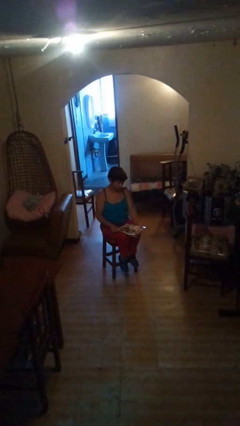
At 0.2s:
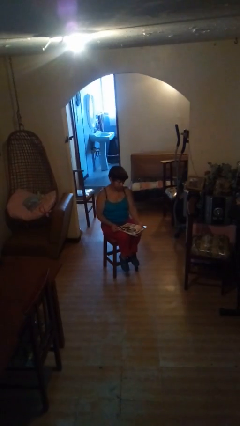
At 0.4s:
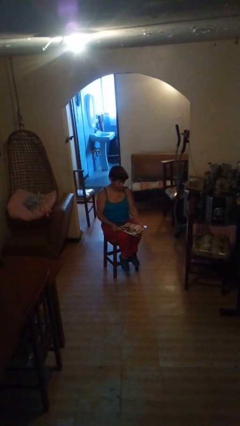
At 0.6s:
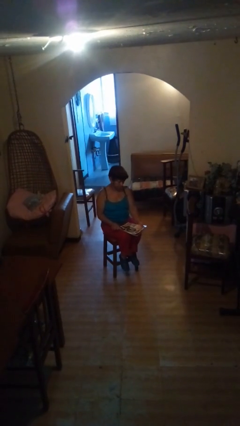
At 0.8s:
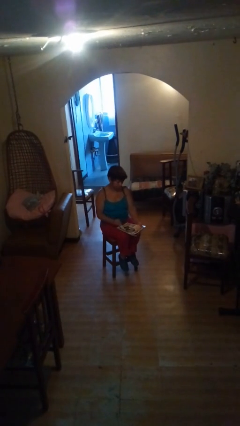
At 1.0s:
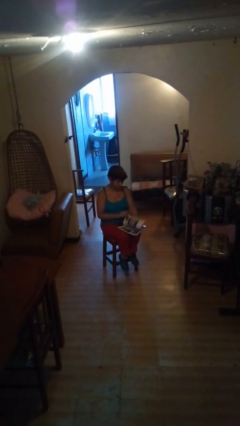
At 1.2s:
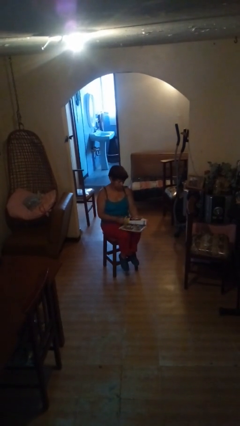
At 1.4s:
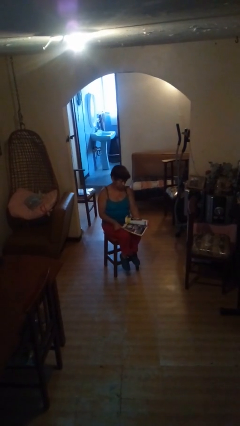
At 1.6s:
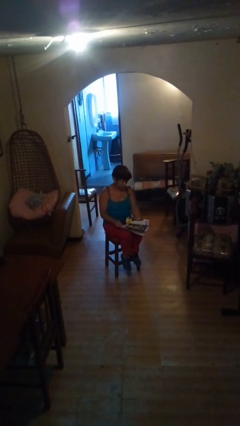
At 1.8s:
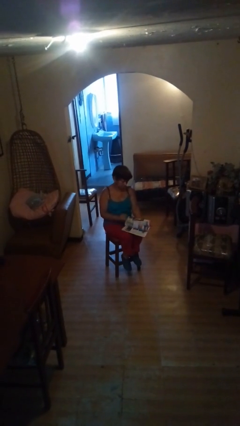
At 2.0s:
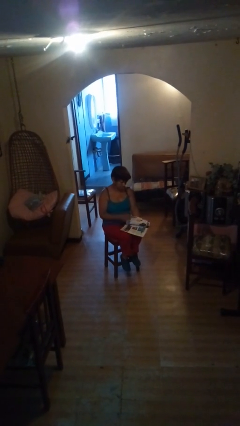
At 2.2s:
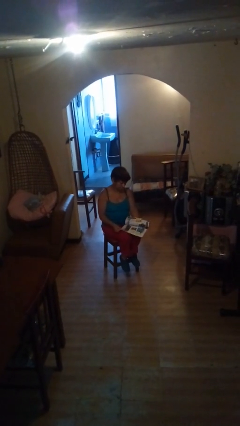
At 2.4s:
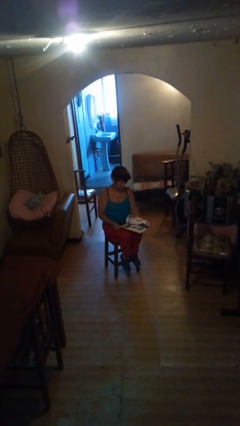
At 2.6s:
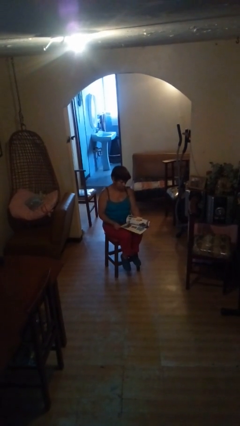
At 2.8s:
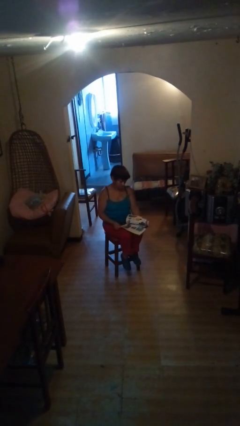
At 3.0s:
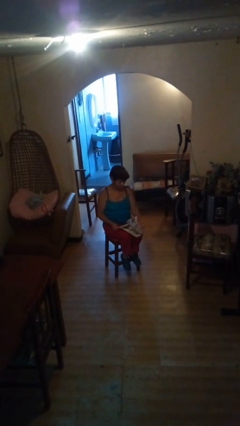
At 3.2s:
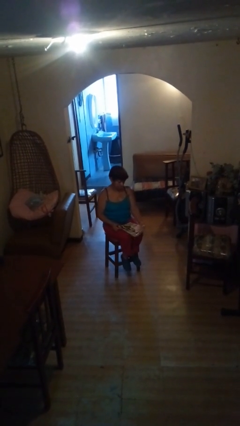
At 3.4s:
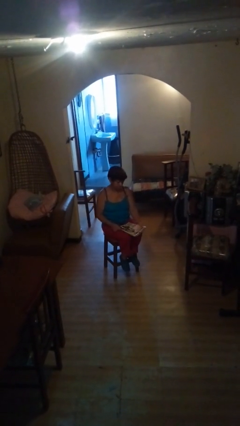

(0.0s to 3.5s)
person reads magazine

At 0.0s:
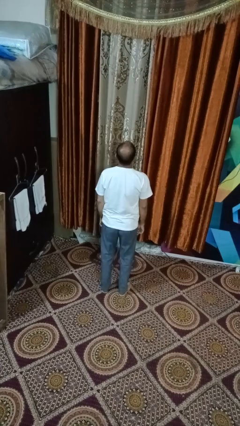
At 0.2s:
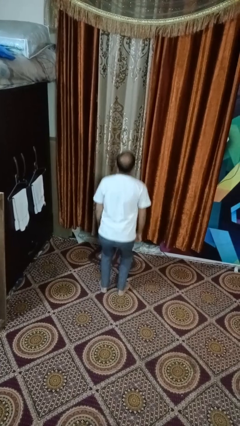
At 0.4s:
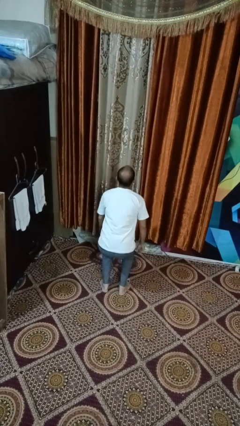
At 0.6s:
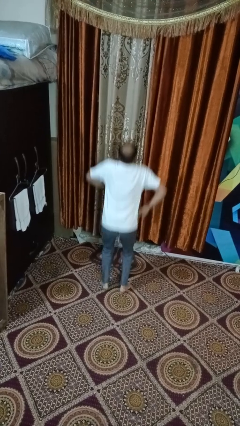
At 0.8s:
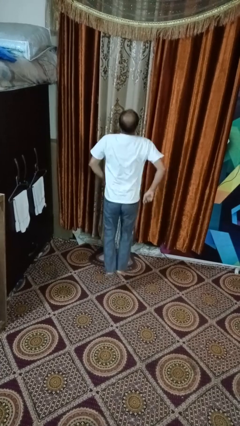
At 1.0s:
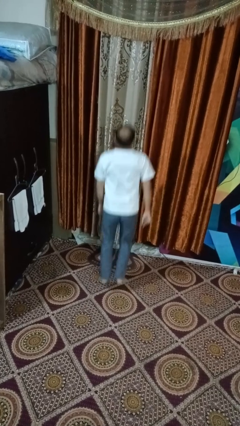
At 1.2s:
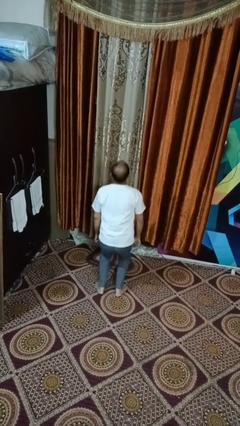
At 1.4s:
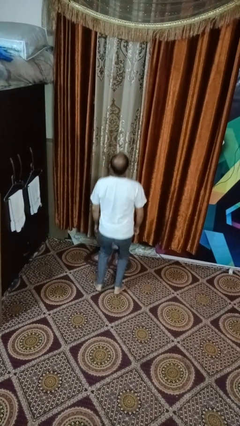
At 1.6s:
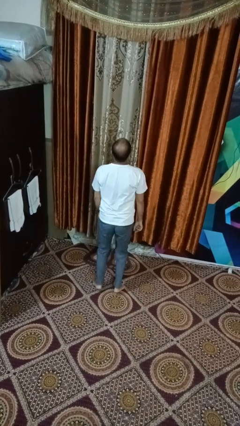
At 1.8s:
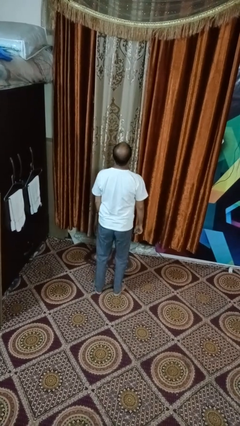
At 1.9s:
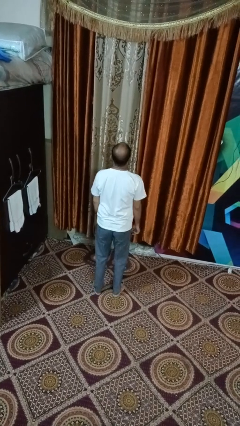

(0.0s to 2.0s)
person jumps

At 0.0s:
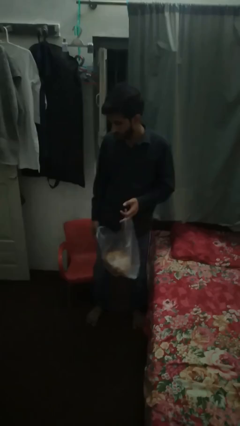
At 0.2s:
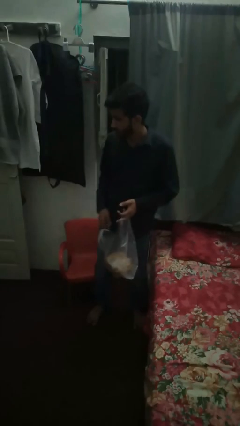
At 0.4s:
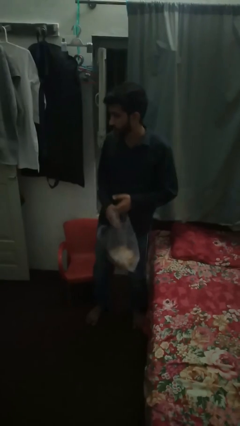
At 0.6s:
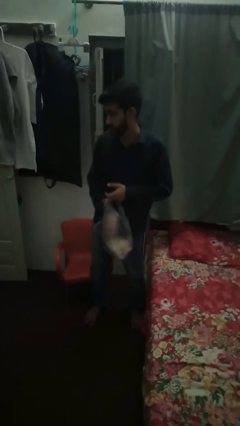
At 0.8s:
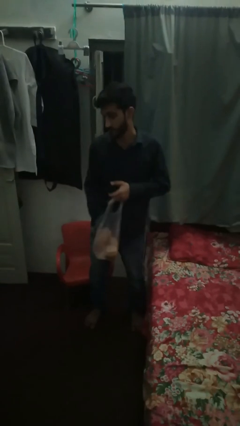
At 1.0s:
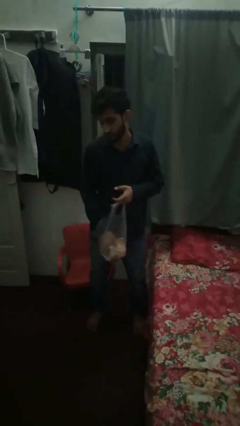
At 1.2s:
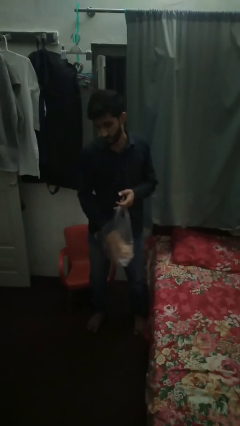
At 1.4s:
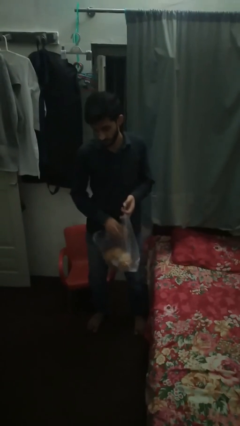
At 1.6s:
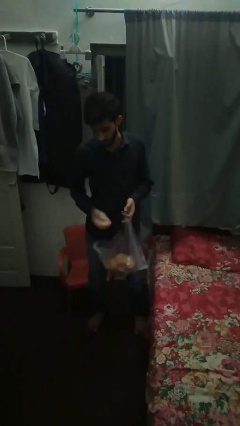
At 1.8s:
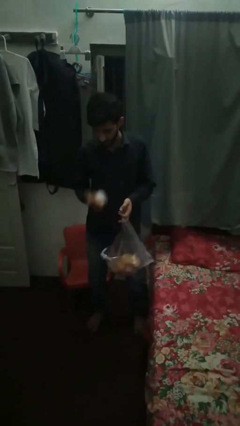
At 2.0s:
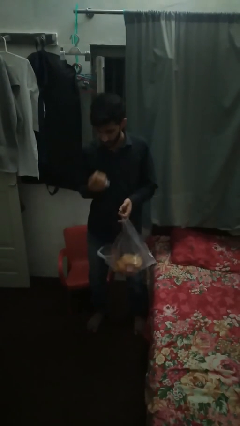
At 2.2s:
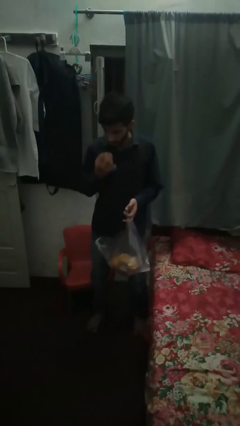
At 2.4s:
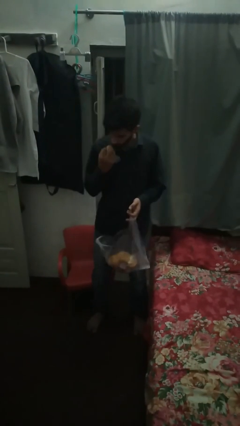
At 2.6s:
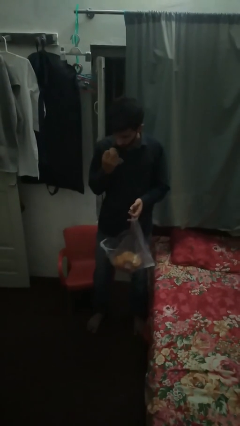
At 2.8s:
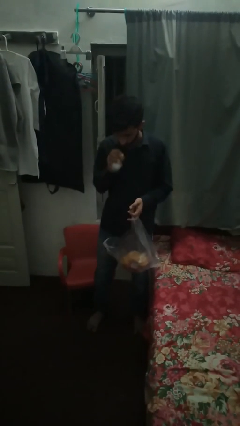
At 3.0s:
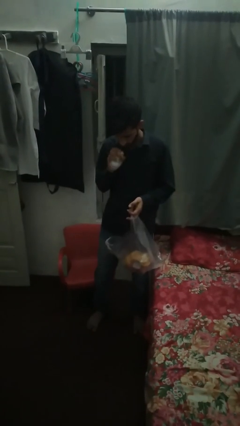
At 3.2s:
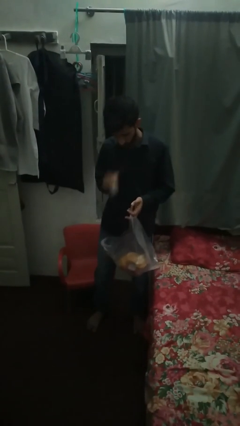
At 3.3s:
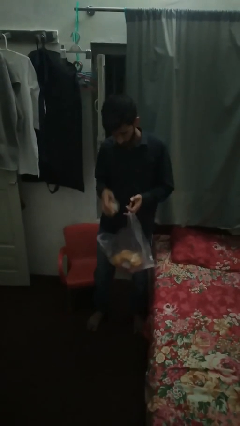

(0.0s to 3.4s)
person eats snack from bag

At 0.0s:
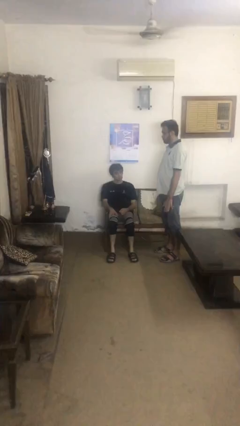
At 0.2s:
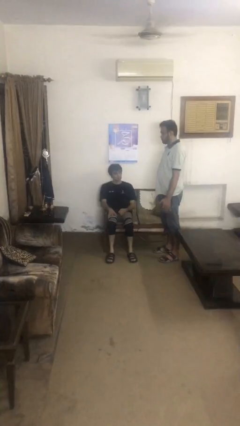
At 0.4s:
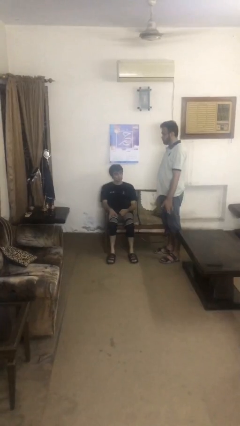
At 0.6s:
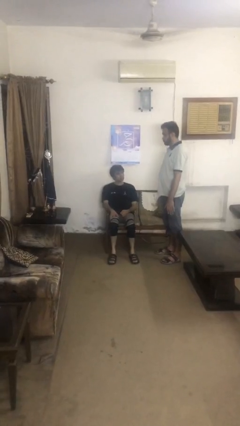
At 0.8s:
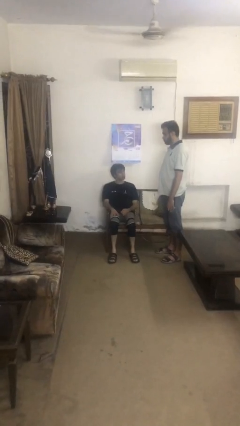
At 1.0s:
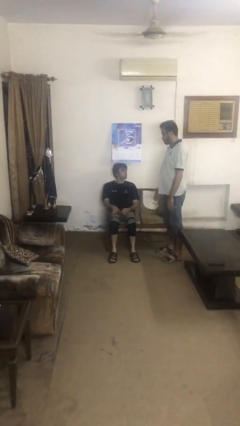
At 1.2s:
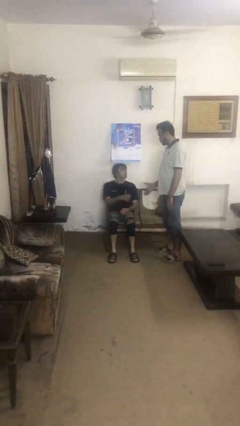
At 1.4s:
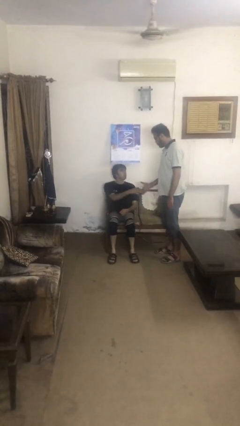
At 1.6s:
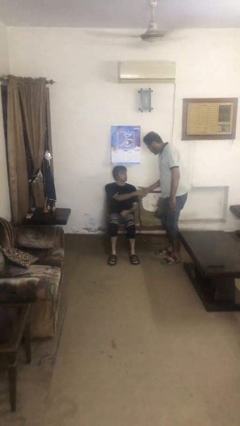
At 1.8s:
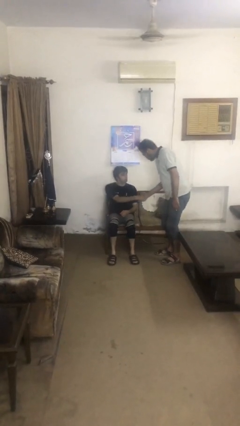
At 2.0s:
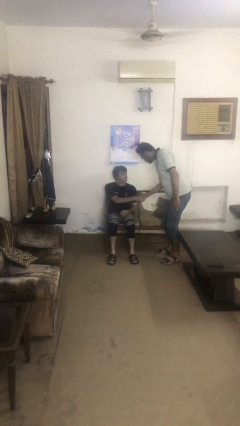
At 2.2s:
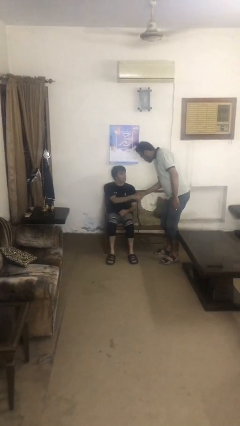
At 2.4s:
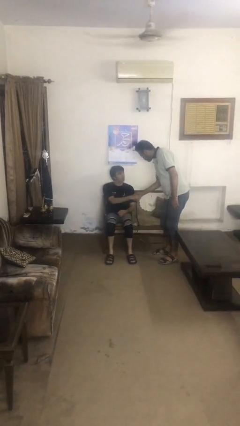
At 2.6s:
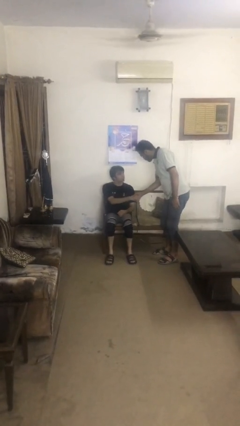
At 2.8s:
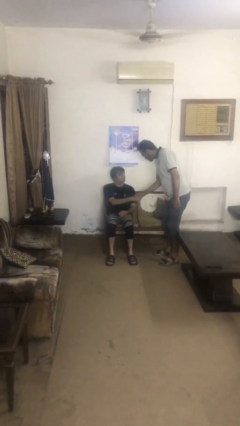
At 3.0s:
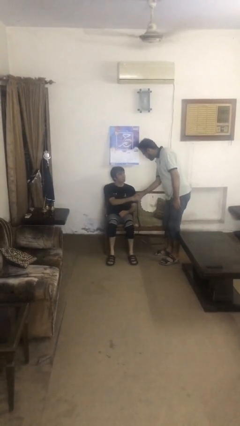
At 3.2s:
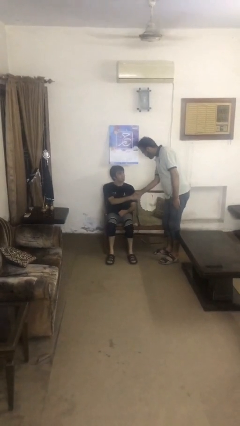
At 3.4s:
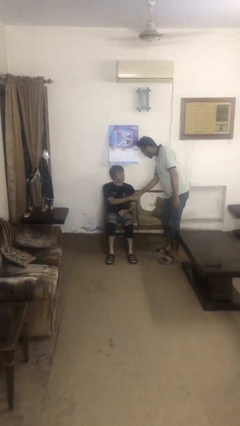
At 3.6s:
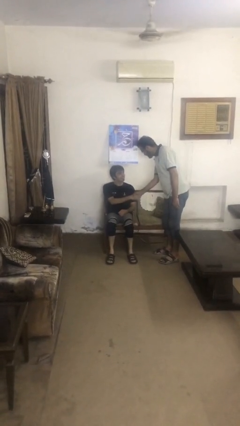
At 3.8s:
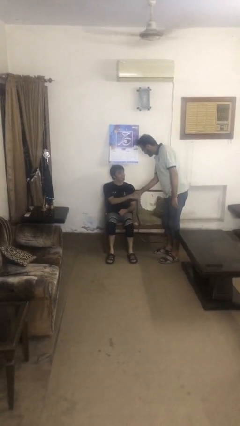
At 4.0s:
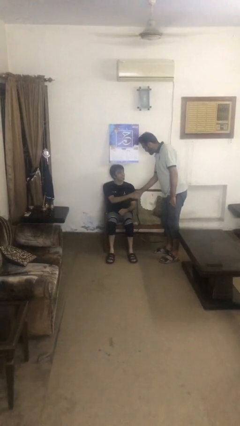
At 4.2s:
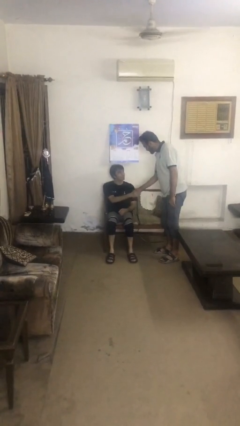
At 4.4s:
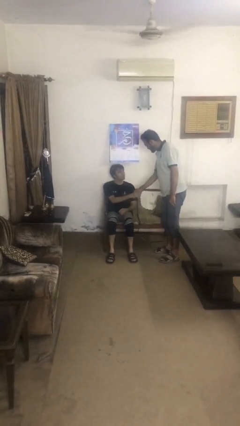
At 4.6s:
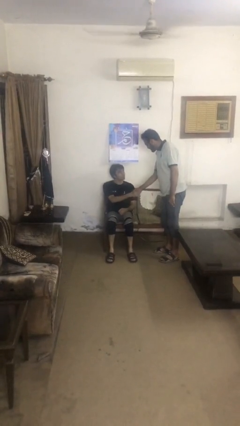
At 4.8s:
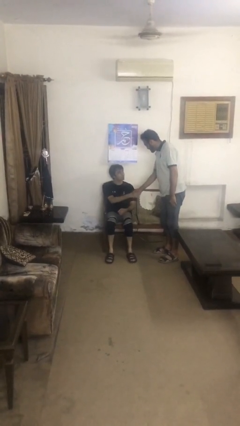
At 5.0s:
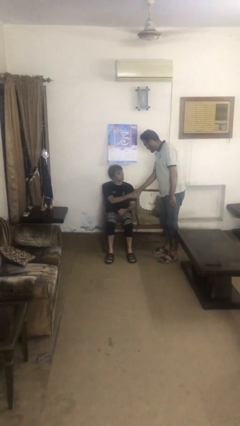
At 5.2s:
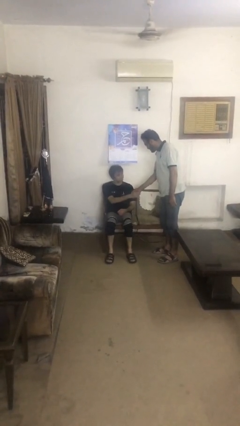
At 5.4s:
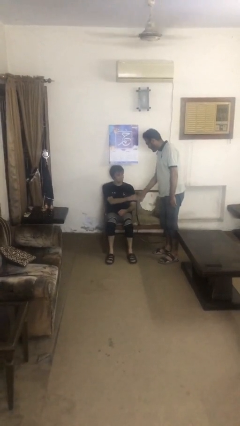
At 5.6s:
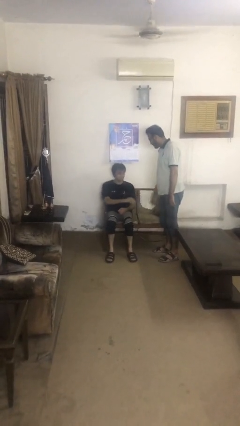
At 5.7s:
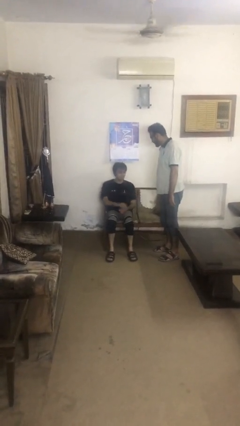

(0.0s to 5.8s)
person shakes hand

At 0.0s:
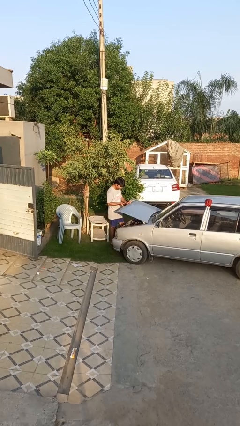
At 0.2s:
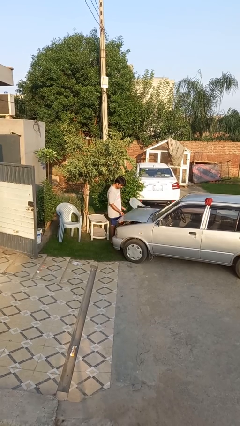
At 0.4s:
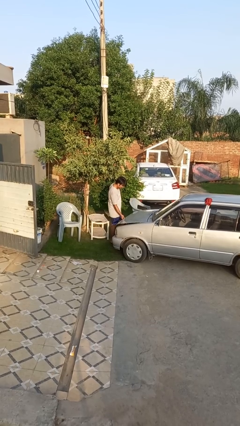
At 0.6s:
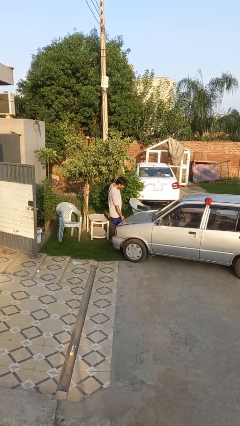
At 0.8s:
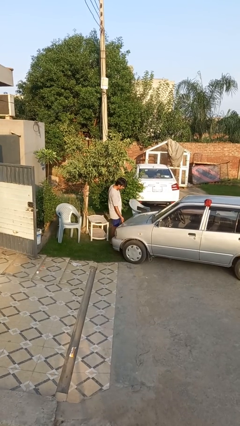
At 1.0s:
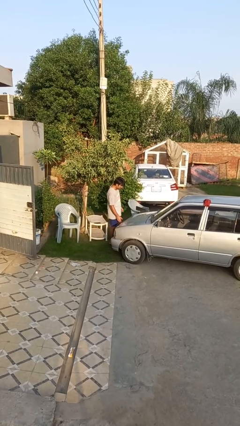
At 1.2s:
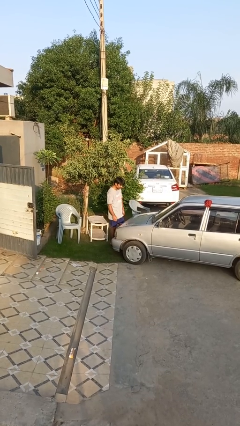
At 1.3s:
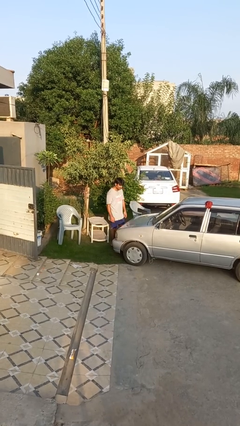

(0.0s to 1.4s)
person closes car hood

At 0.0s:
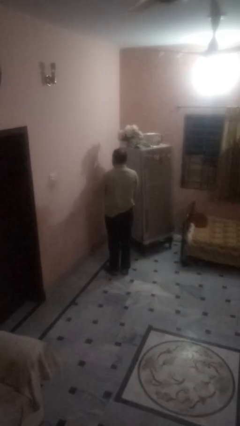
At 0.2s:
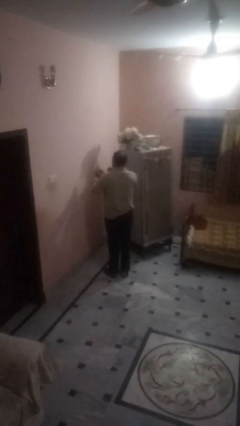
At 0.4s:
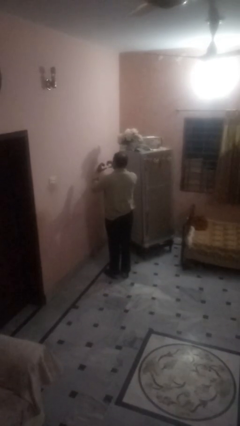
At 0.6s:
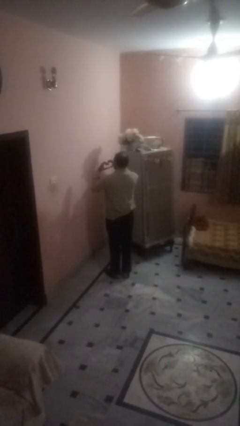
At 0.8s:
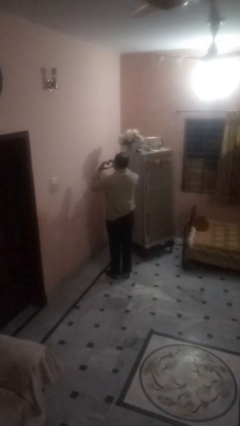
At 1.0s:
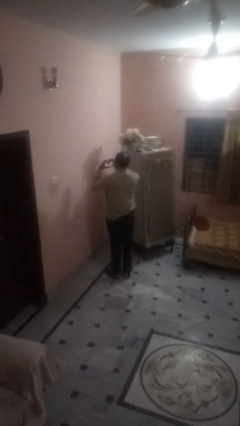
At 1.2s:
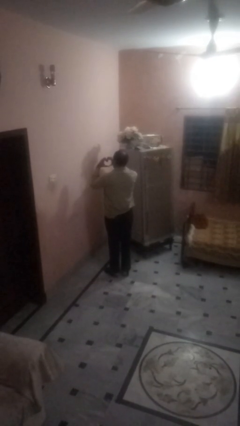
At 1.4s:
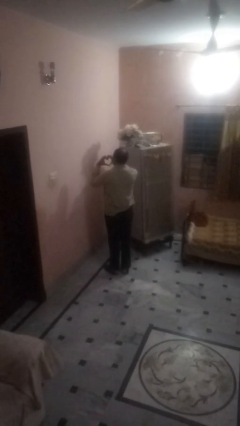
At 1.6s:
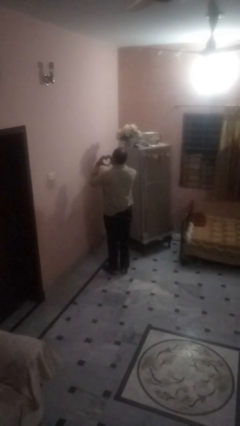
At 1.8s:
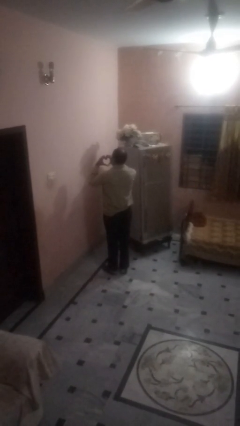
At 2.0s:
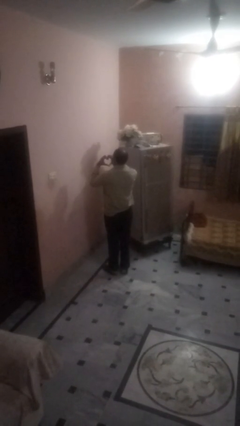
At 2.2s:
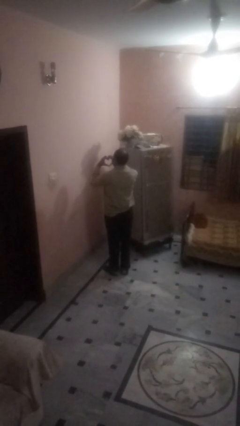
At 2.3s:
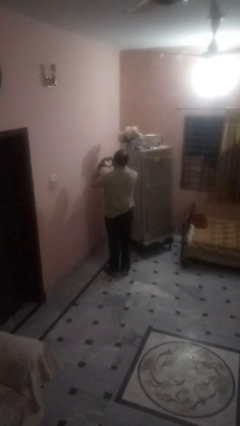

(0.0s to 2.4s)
person gestures heart
